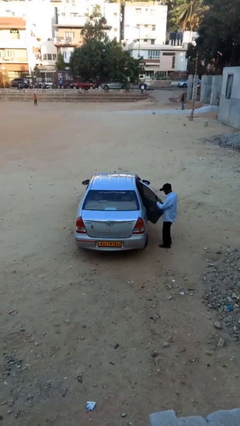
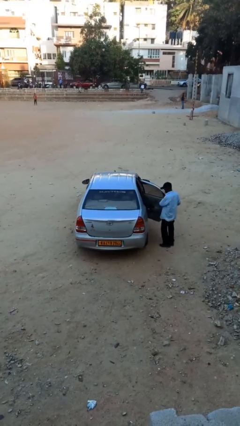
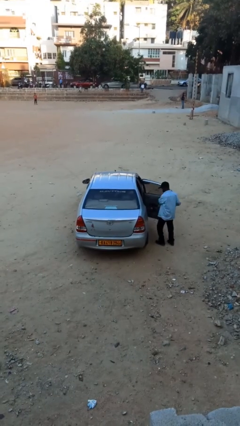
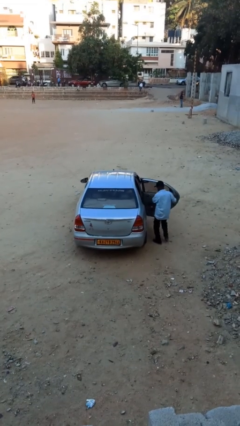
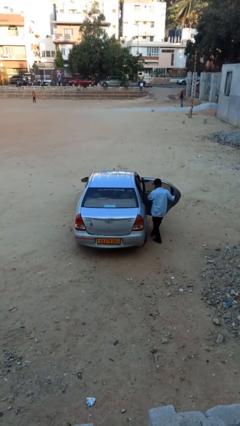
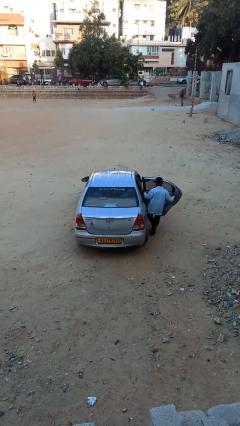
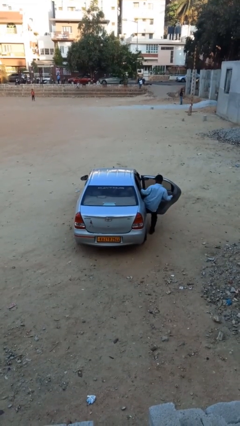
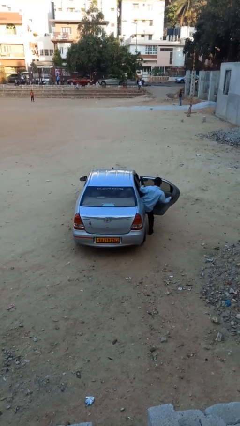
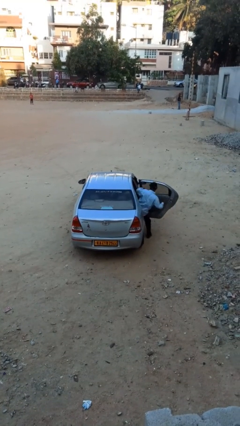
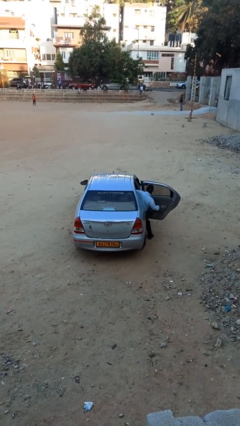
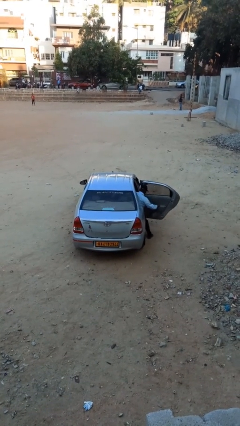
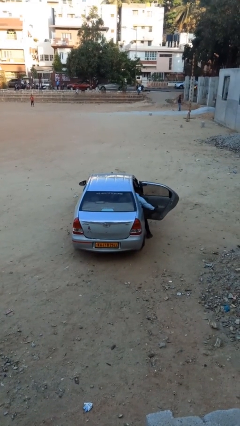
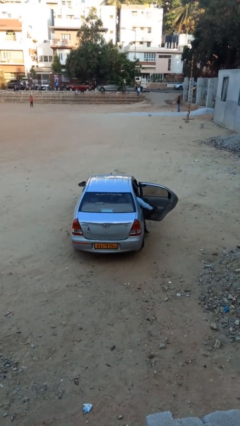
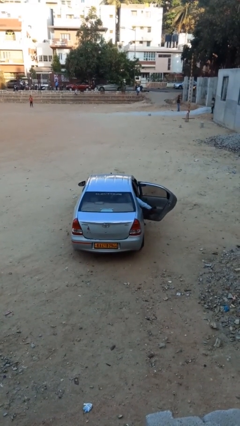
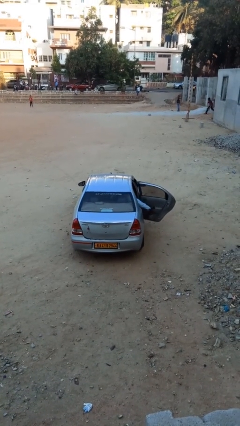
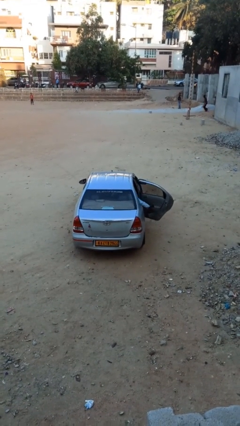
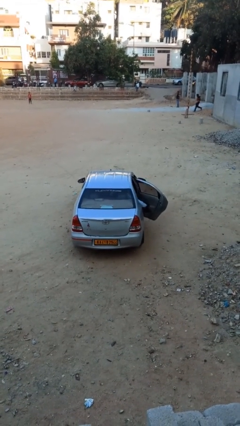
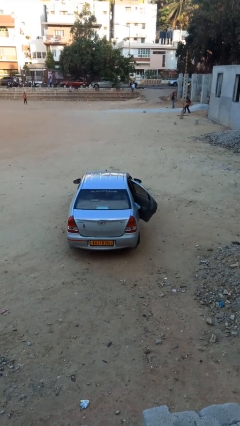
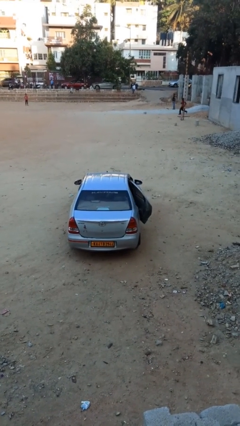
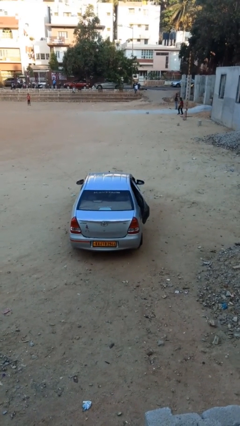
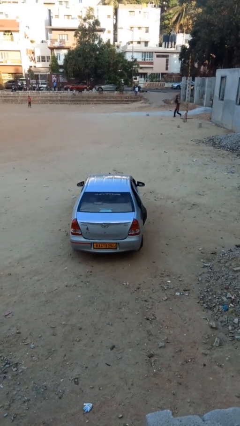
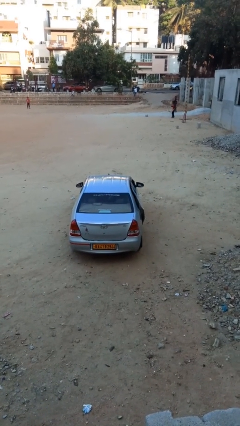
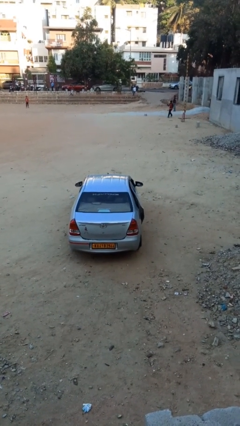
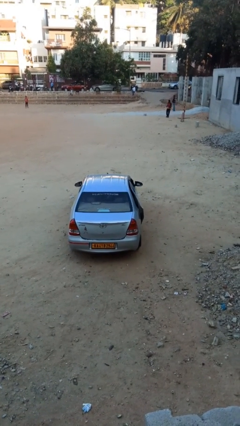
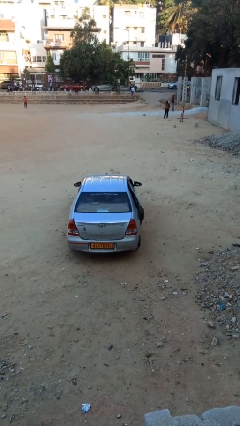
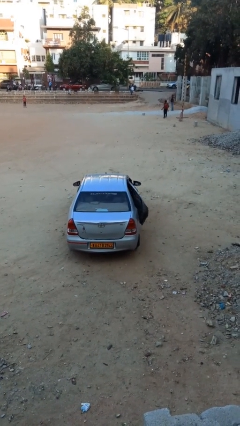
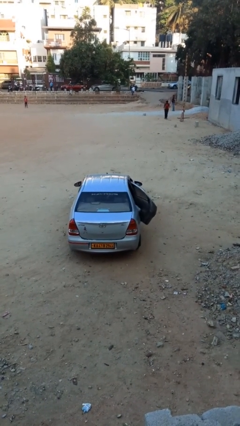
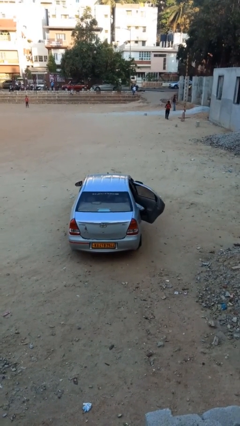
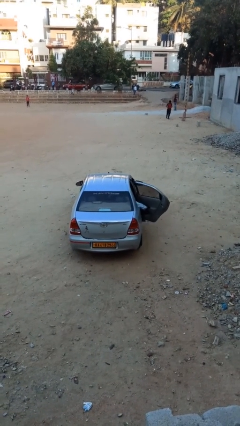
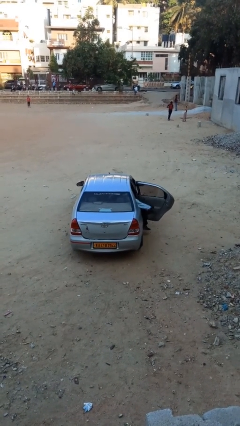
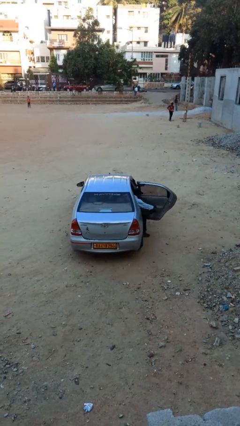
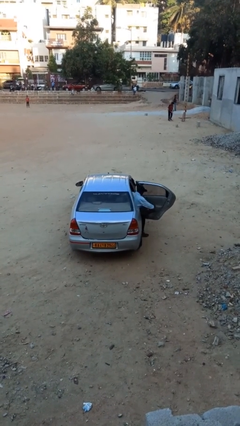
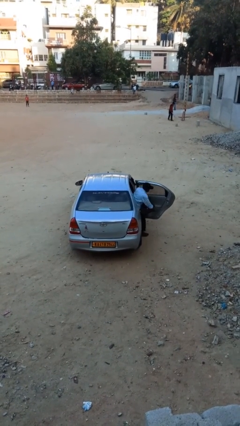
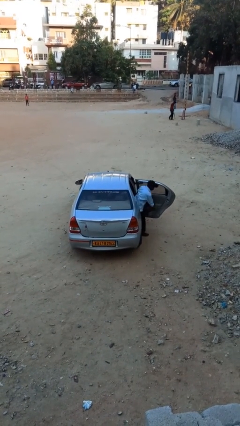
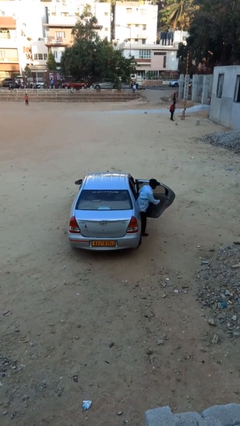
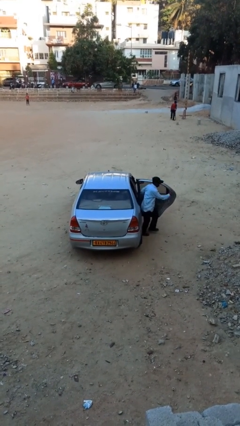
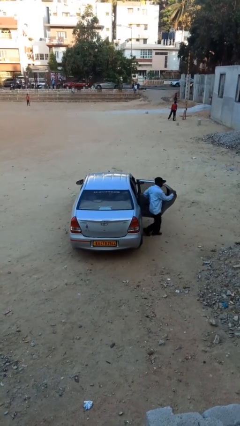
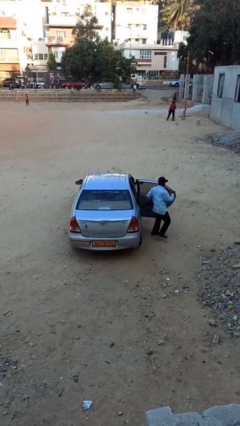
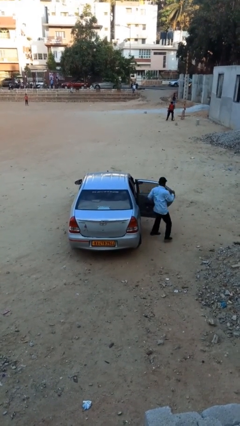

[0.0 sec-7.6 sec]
car picks up person

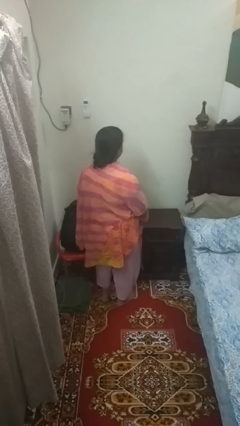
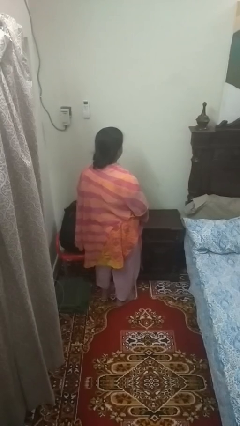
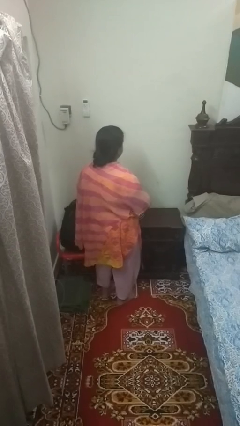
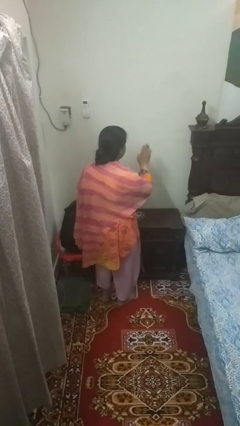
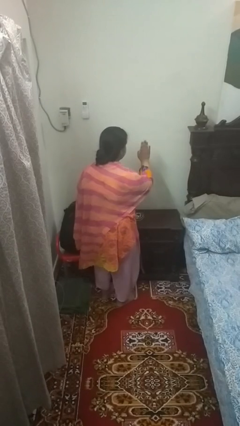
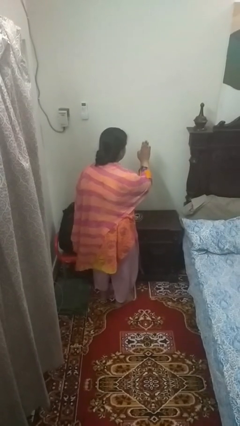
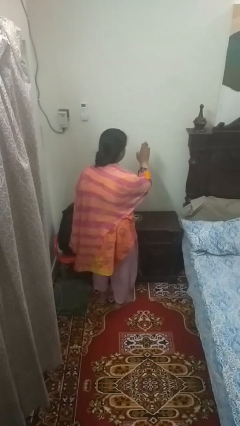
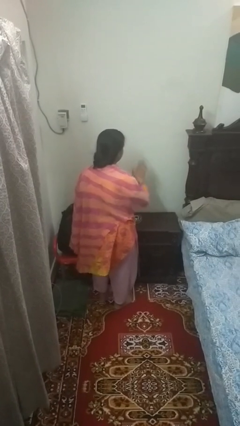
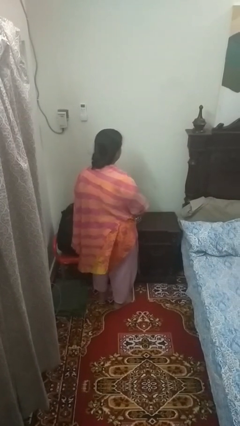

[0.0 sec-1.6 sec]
person gestures stop

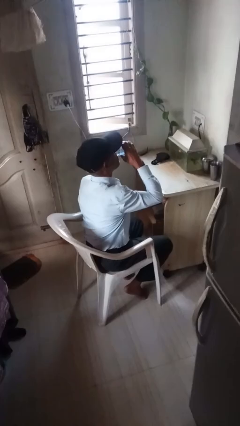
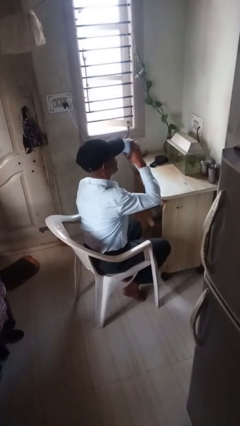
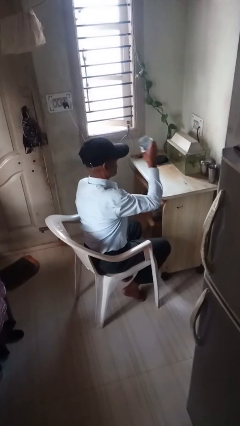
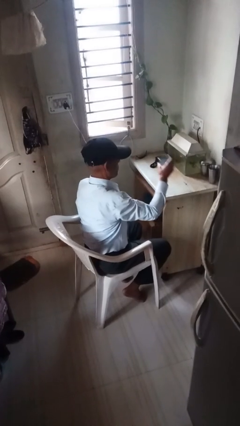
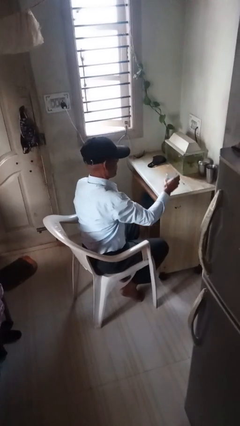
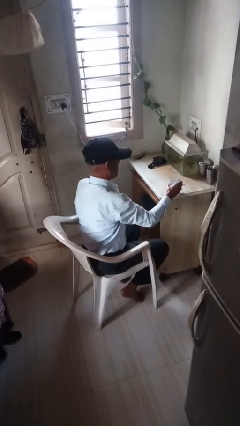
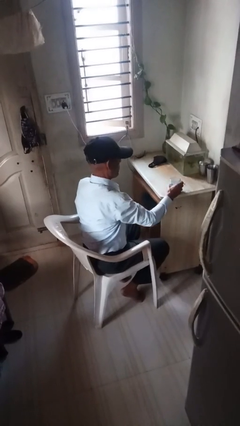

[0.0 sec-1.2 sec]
person puts down object on table

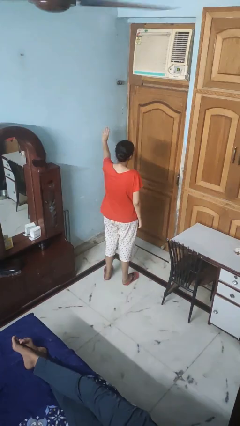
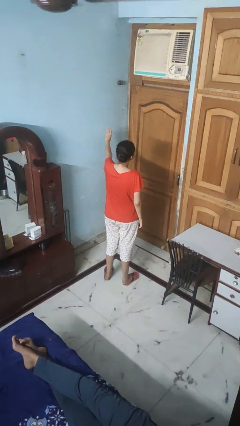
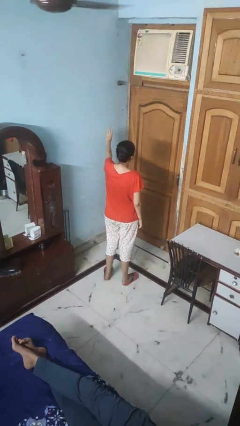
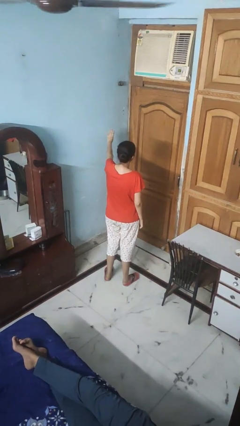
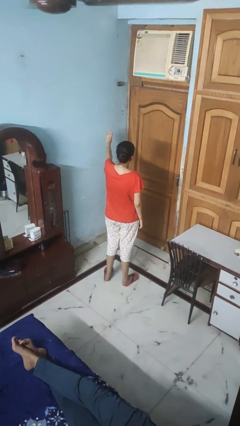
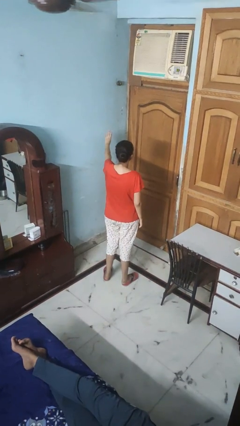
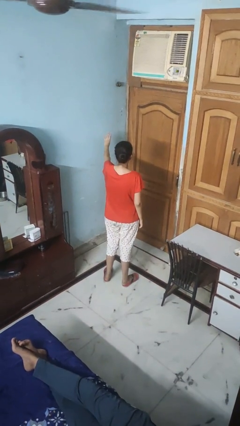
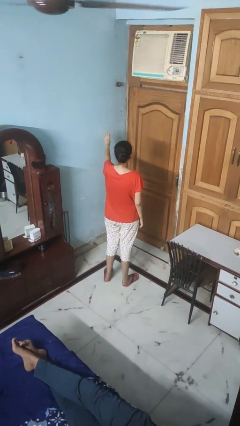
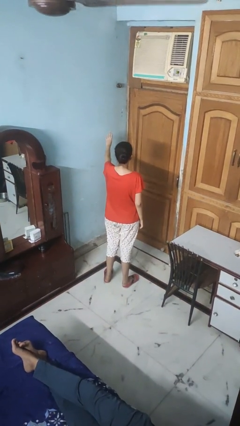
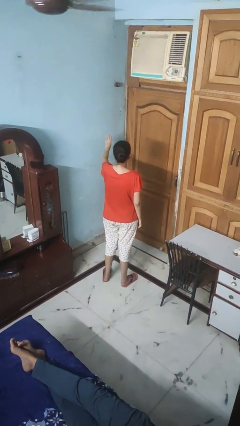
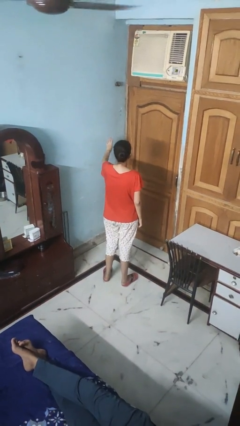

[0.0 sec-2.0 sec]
person gestures number four

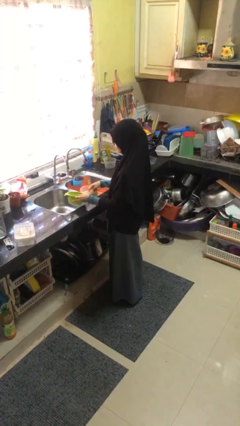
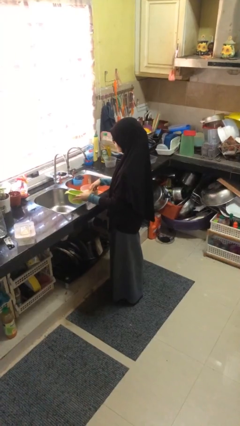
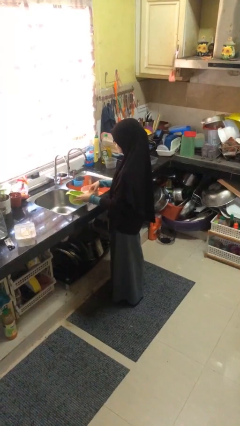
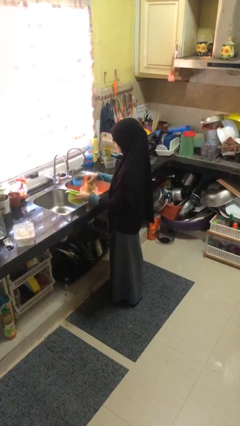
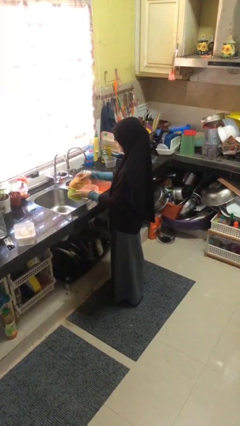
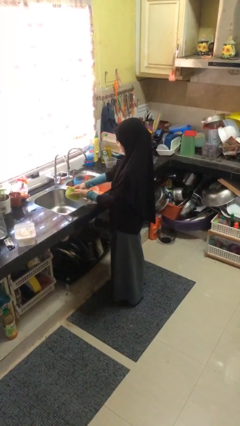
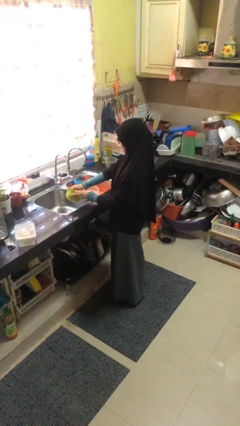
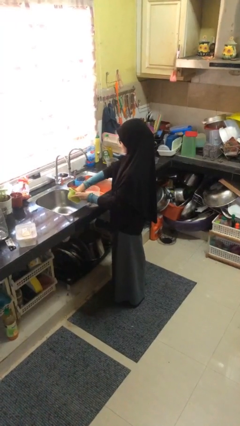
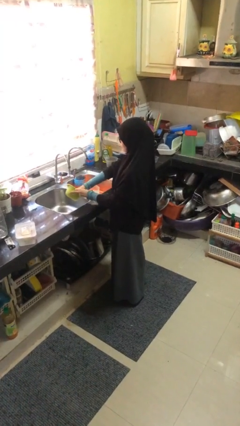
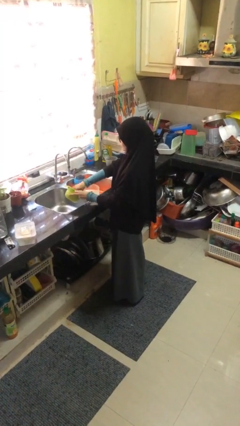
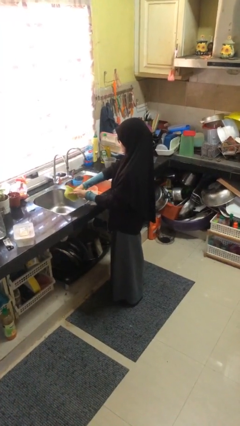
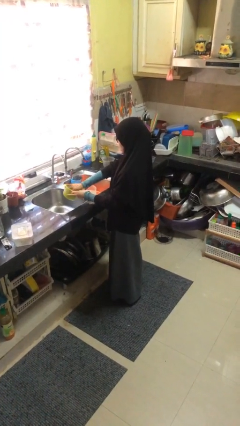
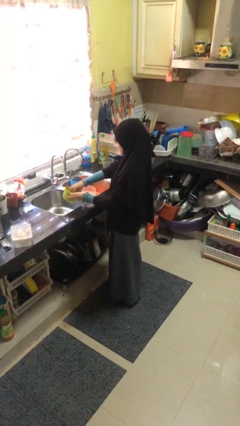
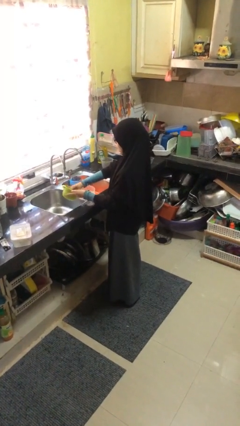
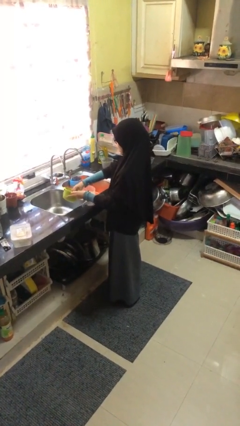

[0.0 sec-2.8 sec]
person washes dish

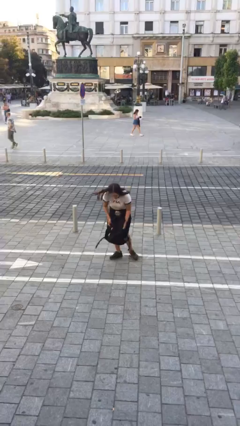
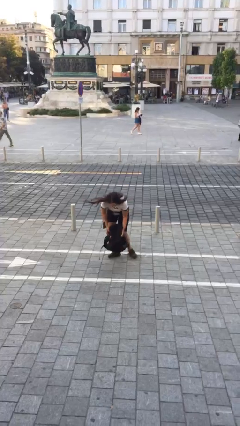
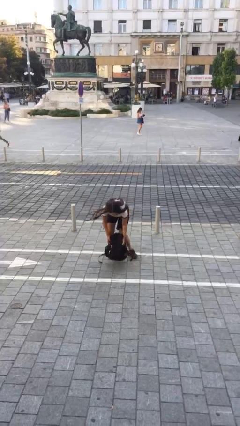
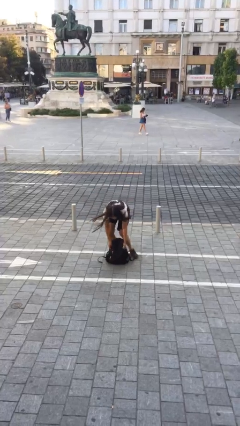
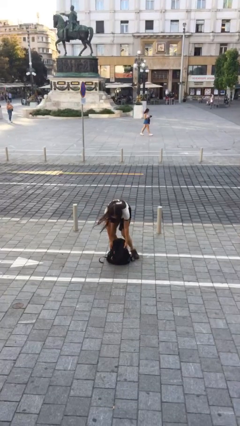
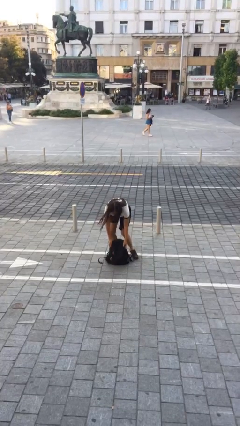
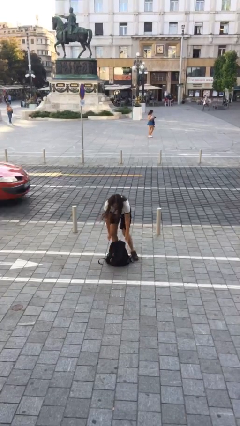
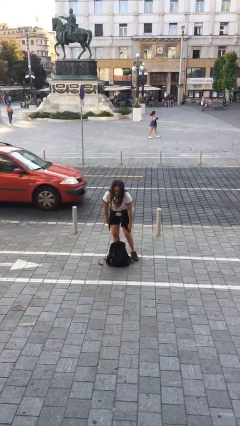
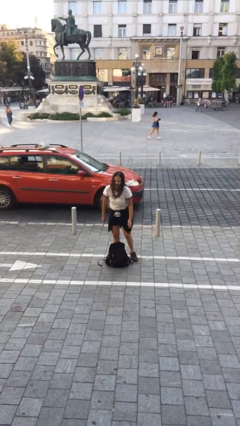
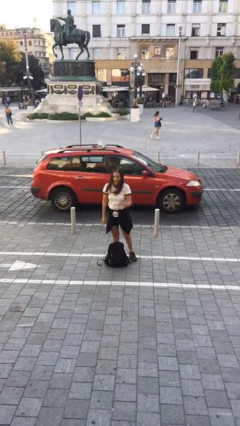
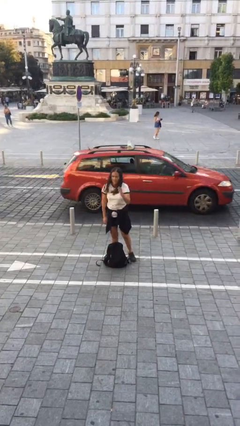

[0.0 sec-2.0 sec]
person puts down object on floor

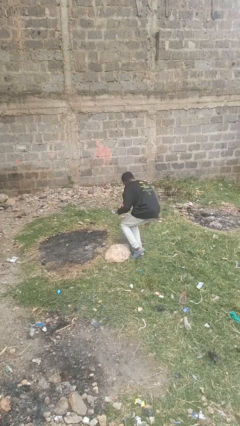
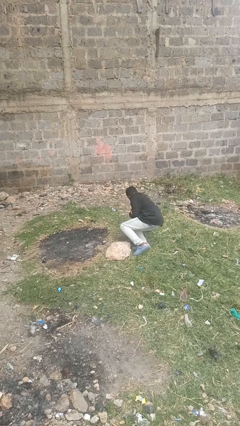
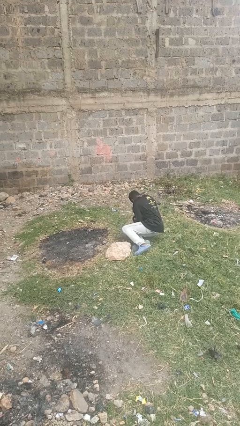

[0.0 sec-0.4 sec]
person trips on object on floor
